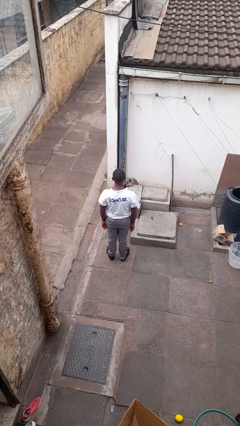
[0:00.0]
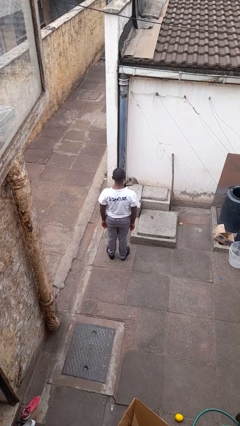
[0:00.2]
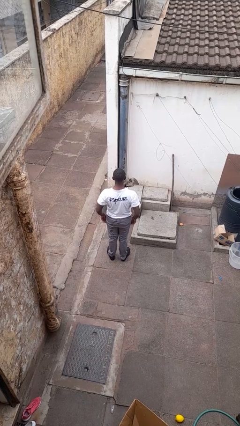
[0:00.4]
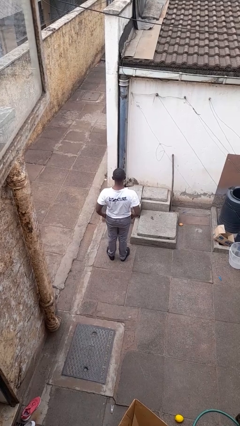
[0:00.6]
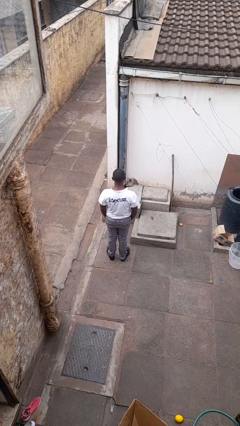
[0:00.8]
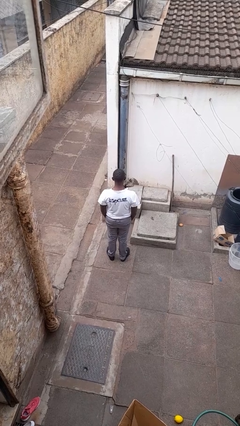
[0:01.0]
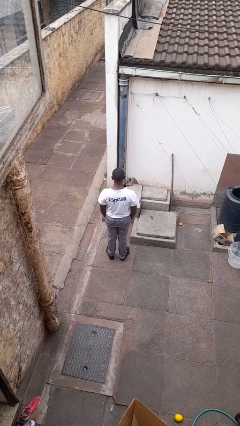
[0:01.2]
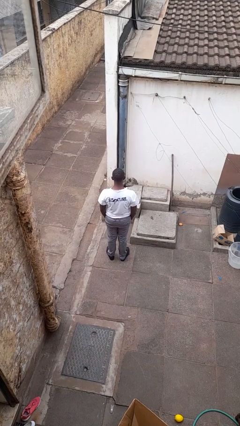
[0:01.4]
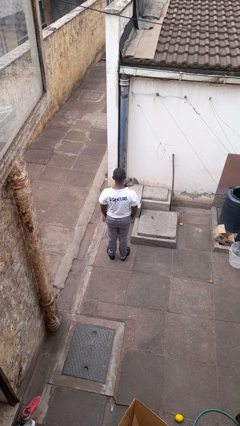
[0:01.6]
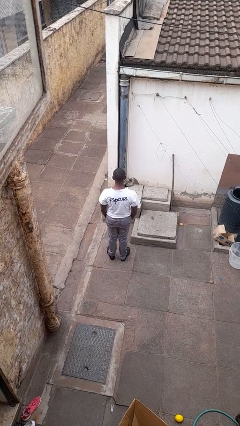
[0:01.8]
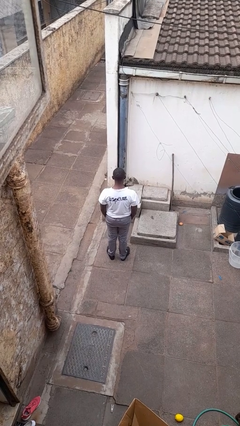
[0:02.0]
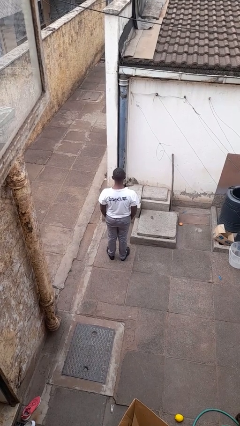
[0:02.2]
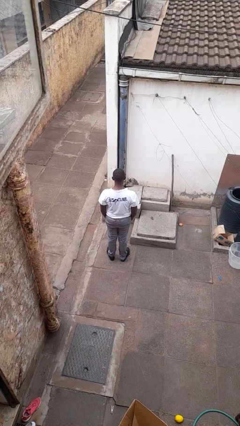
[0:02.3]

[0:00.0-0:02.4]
person puts hands in back pockets

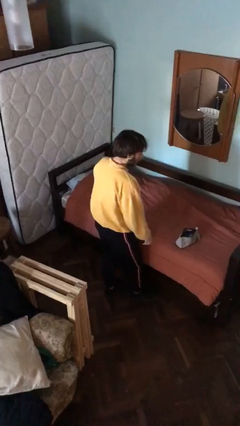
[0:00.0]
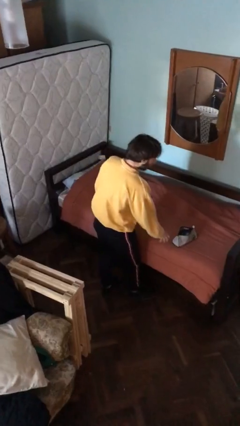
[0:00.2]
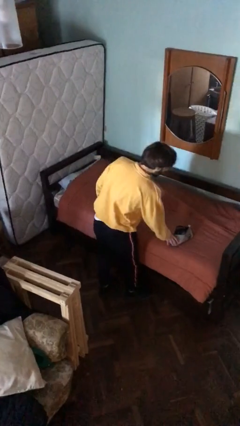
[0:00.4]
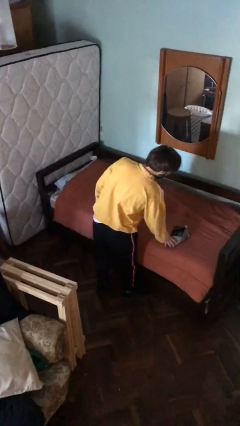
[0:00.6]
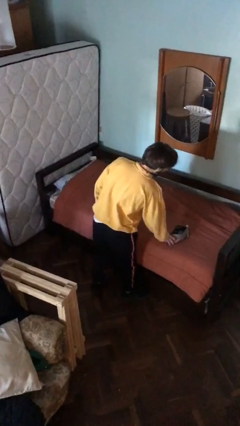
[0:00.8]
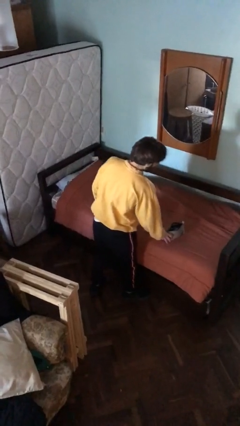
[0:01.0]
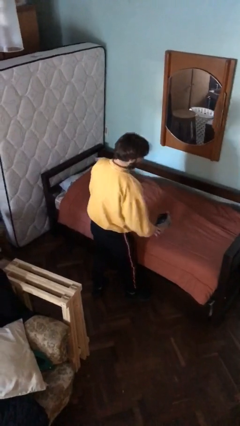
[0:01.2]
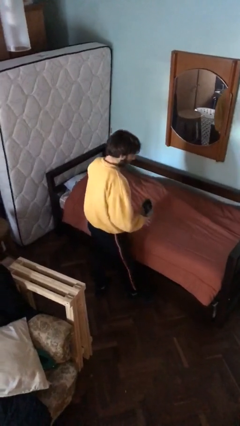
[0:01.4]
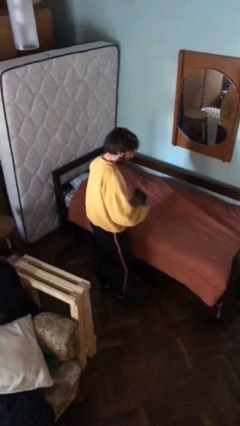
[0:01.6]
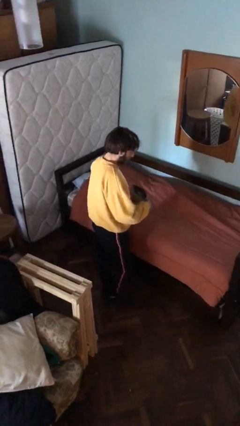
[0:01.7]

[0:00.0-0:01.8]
person picks up object from bed

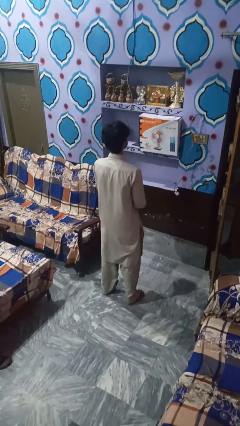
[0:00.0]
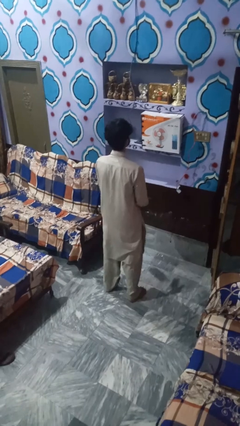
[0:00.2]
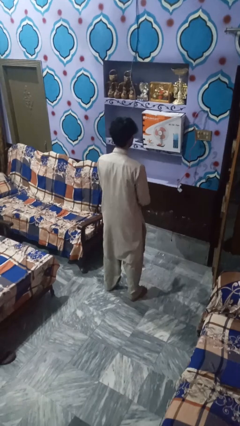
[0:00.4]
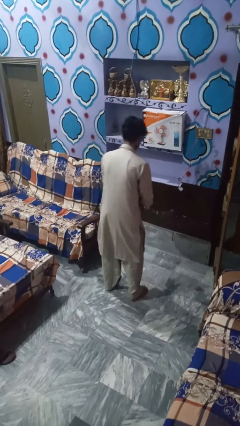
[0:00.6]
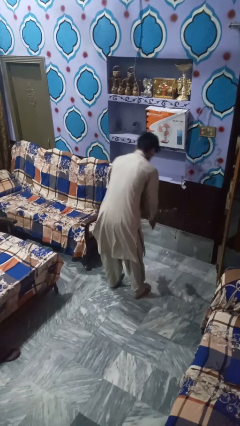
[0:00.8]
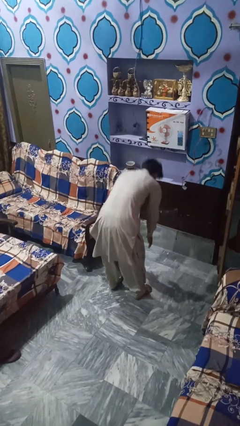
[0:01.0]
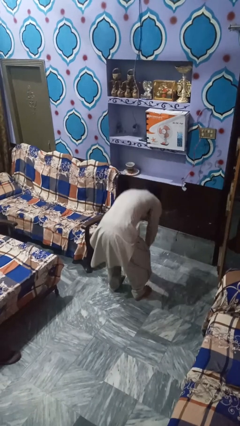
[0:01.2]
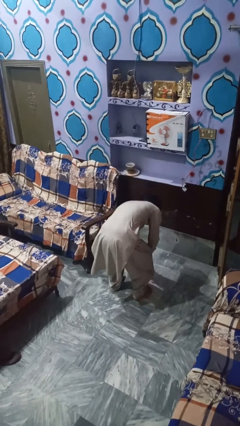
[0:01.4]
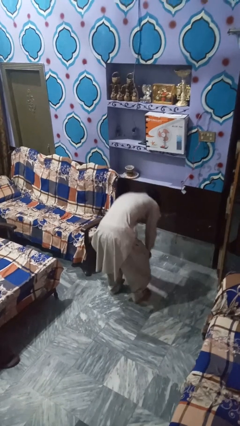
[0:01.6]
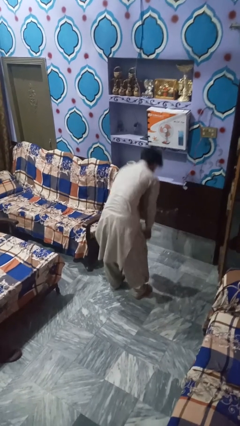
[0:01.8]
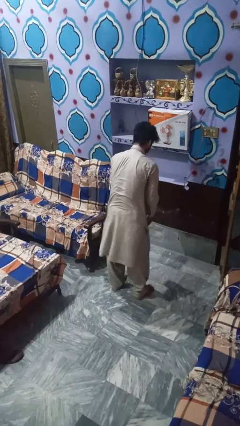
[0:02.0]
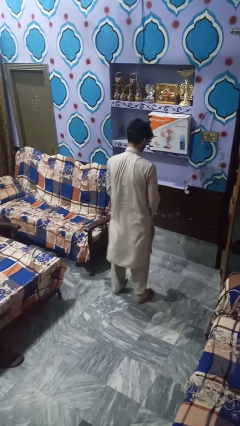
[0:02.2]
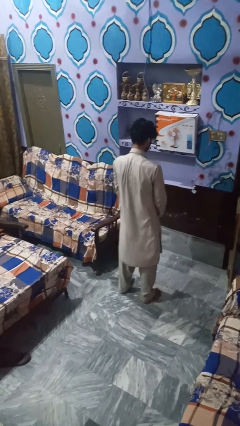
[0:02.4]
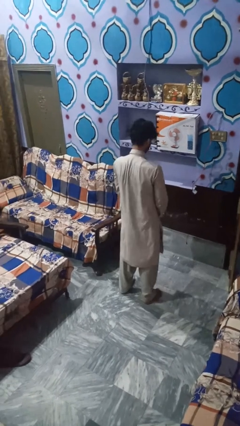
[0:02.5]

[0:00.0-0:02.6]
person picks up object from floor

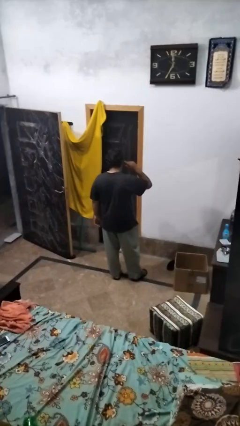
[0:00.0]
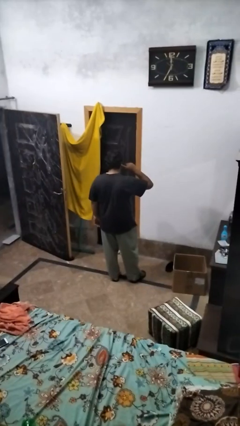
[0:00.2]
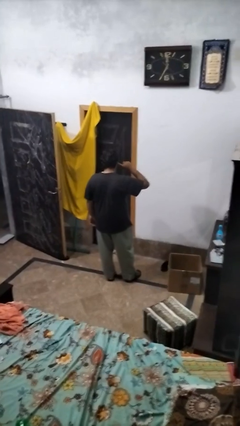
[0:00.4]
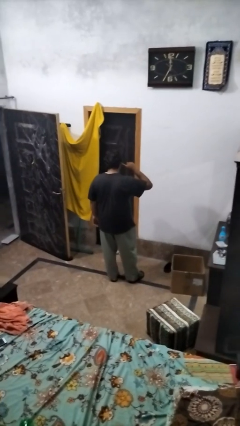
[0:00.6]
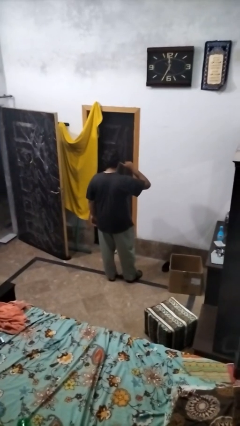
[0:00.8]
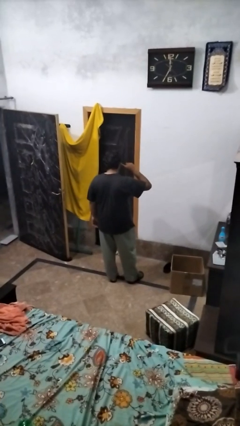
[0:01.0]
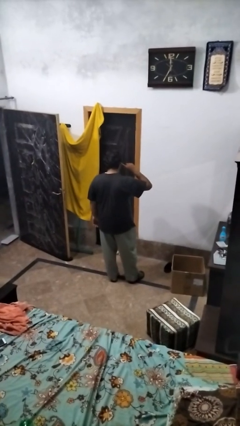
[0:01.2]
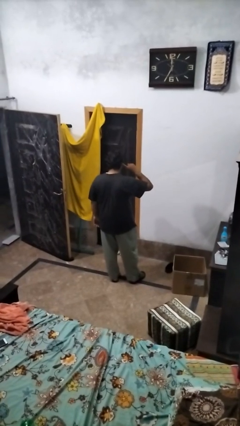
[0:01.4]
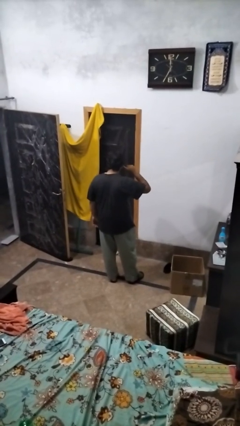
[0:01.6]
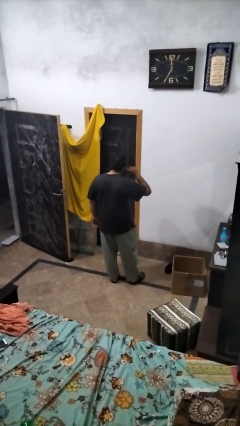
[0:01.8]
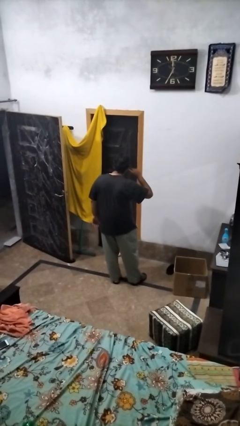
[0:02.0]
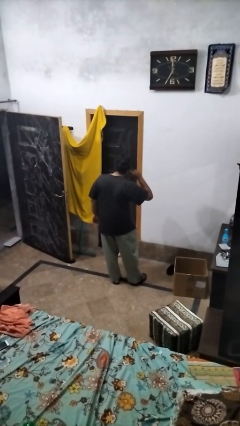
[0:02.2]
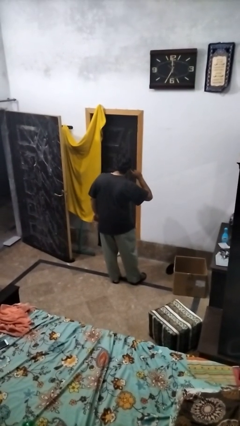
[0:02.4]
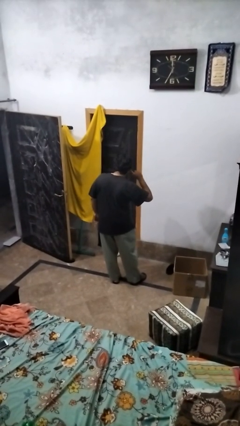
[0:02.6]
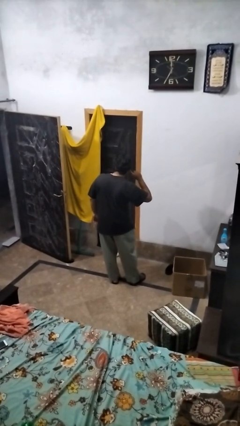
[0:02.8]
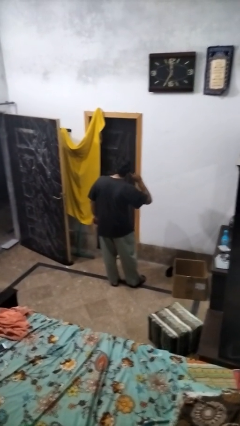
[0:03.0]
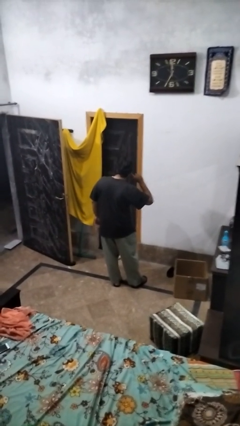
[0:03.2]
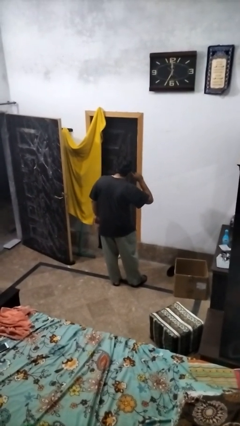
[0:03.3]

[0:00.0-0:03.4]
person gestures listen closely

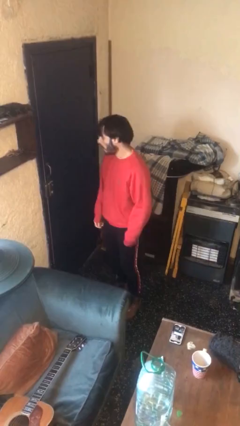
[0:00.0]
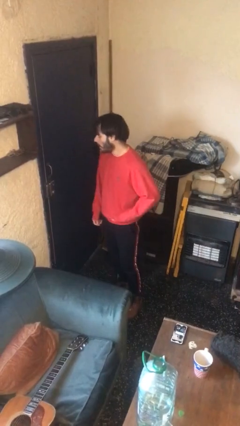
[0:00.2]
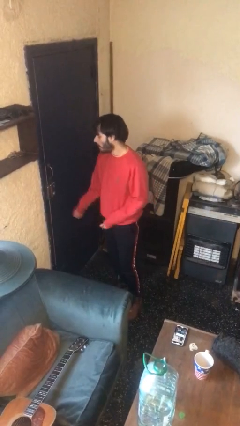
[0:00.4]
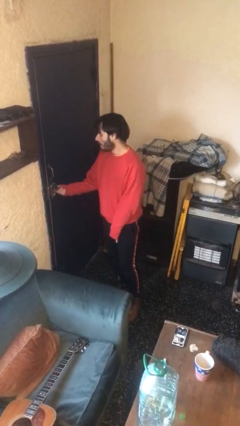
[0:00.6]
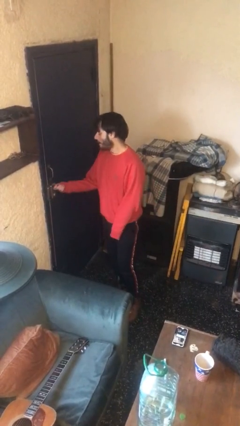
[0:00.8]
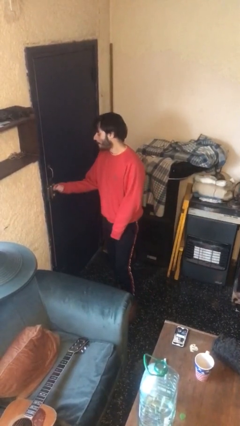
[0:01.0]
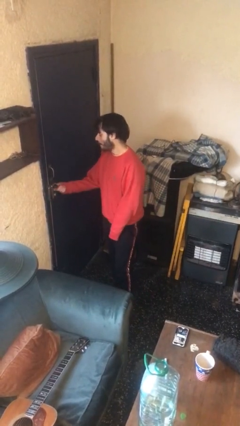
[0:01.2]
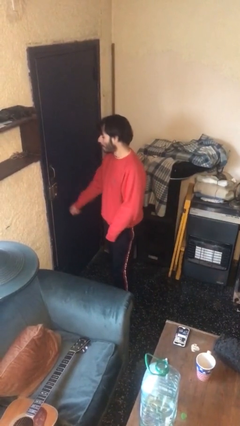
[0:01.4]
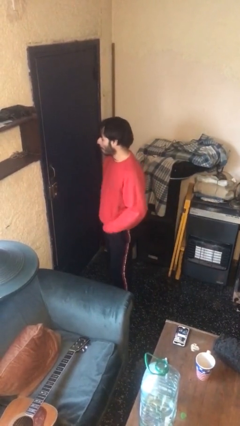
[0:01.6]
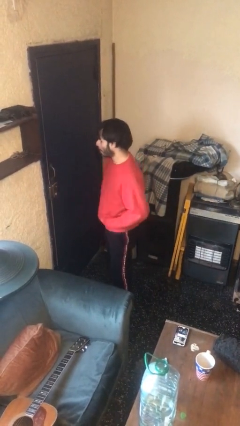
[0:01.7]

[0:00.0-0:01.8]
person unlocks door with keys

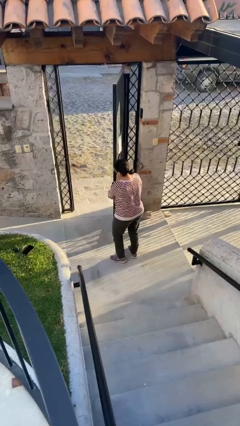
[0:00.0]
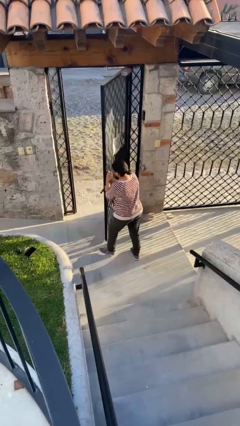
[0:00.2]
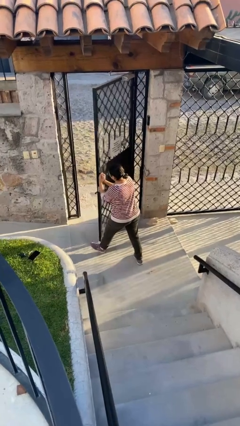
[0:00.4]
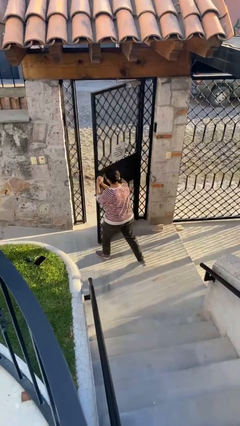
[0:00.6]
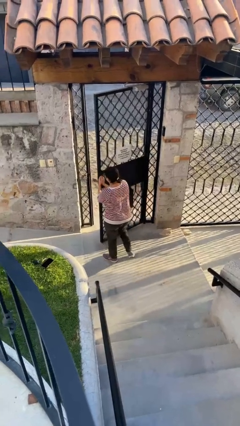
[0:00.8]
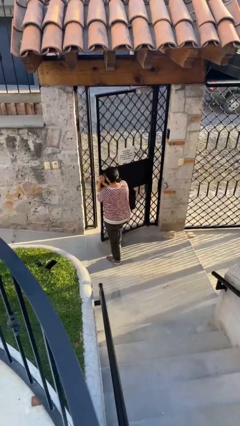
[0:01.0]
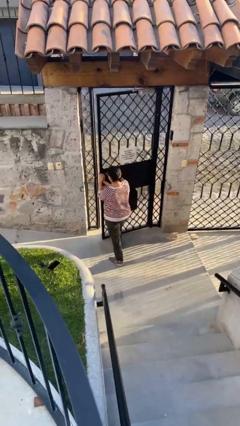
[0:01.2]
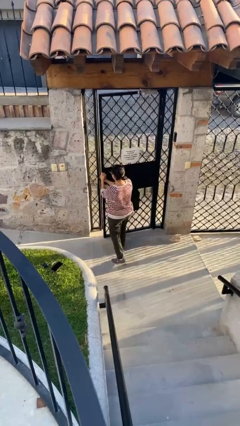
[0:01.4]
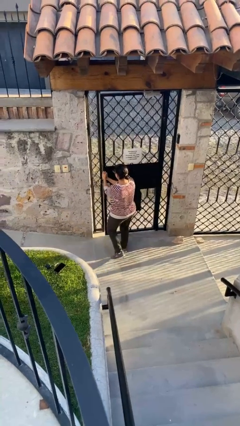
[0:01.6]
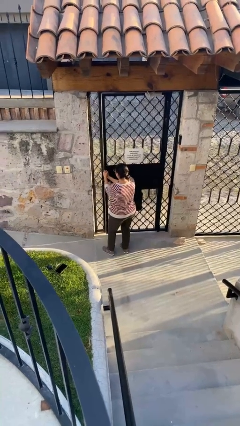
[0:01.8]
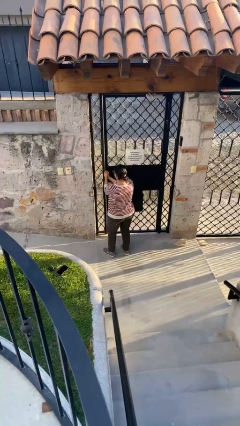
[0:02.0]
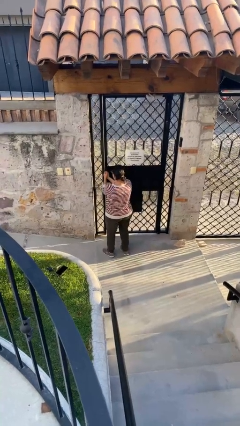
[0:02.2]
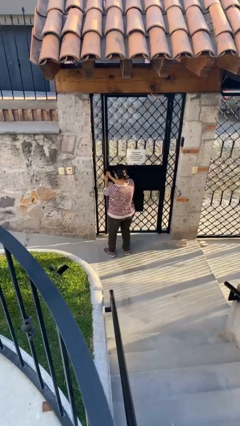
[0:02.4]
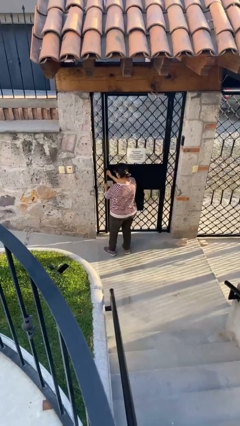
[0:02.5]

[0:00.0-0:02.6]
person closes facility door

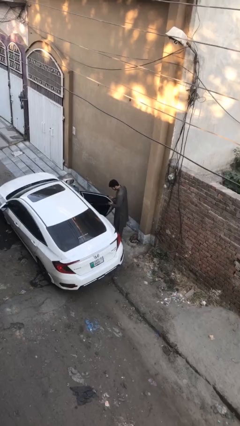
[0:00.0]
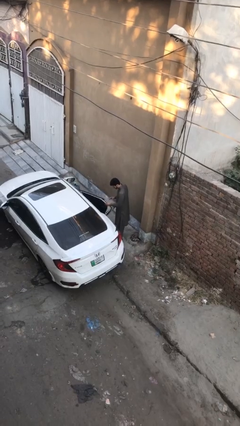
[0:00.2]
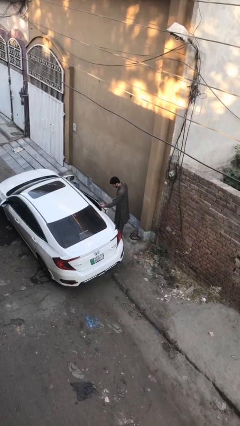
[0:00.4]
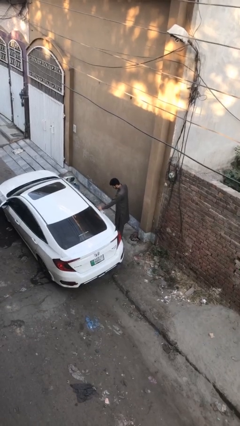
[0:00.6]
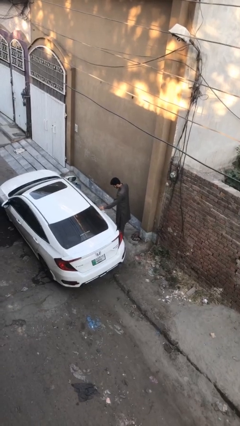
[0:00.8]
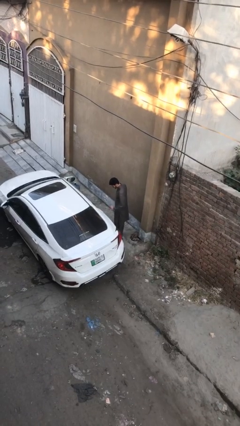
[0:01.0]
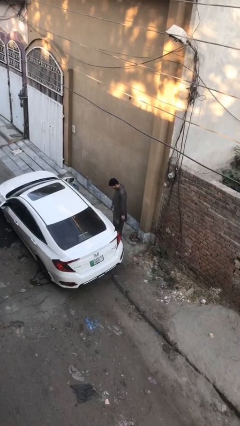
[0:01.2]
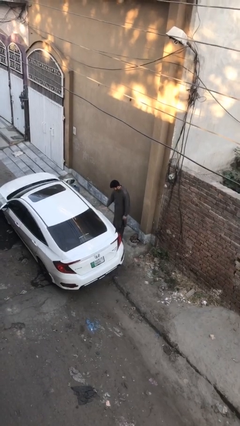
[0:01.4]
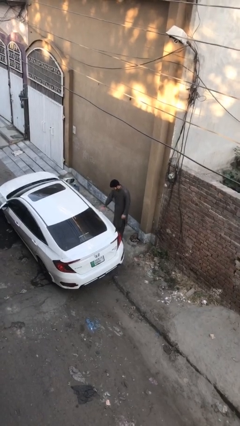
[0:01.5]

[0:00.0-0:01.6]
person closes car door

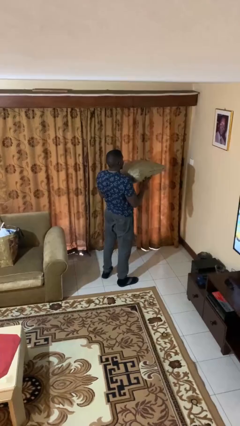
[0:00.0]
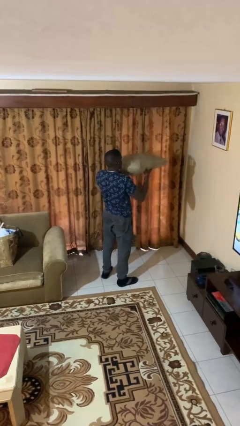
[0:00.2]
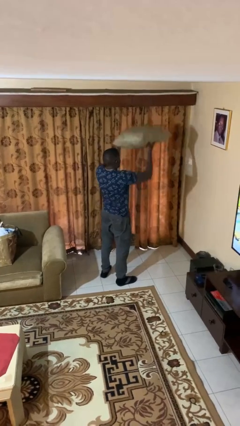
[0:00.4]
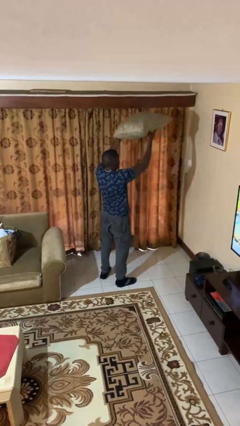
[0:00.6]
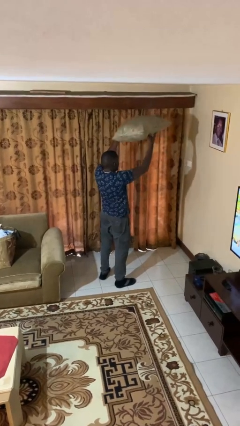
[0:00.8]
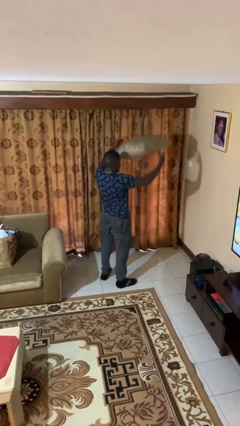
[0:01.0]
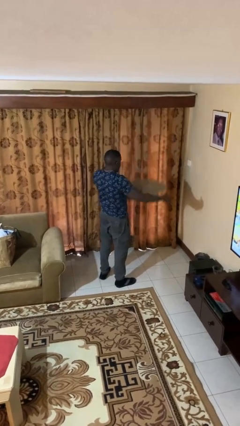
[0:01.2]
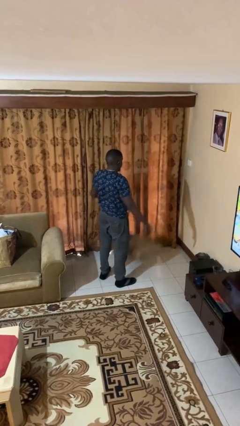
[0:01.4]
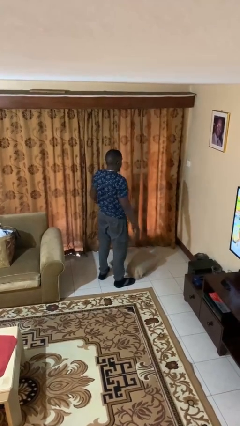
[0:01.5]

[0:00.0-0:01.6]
person drops object
